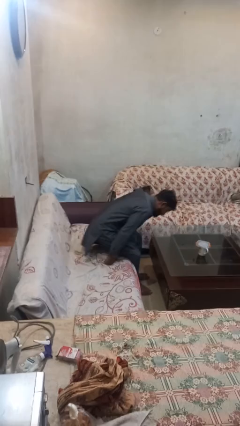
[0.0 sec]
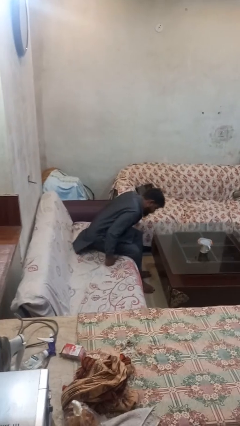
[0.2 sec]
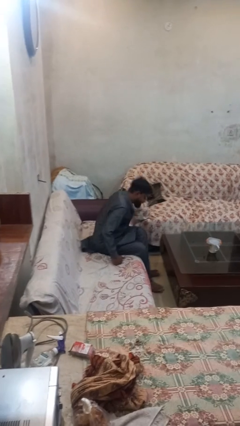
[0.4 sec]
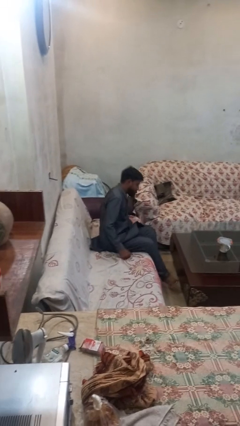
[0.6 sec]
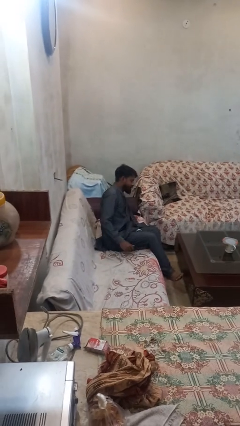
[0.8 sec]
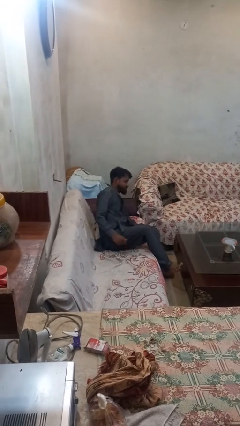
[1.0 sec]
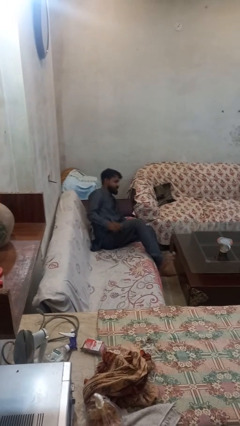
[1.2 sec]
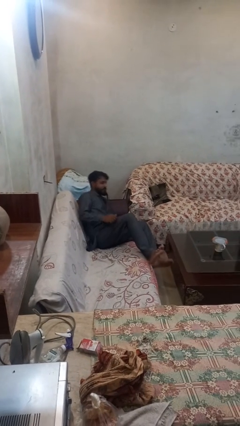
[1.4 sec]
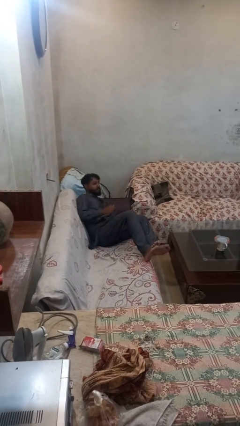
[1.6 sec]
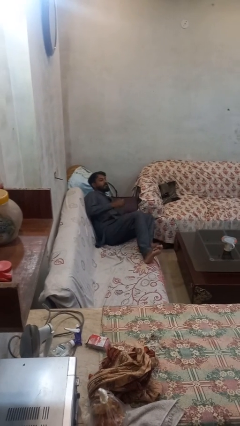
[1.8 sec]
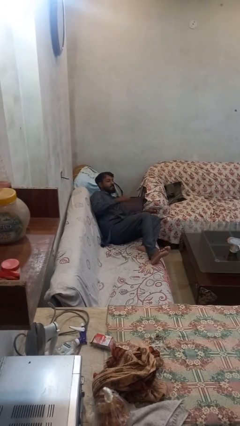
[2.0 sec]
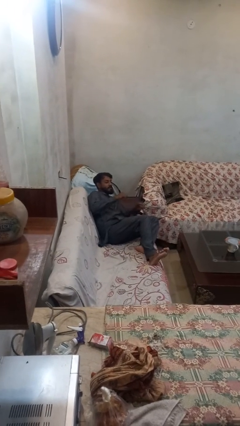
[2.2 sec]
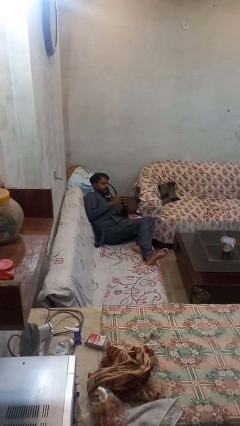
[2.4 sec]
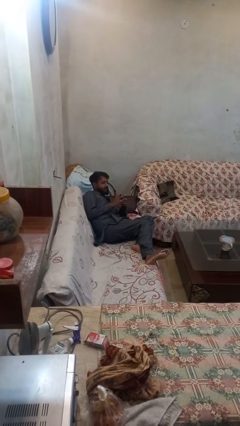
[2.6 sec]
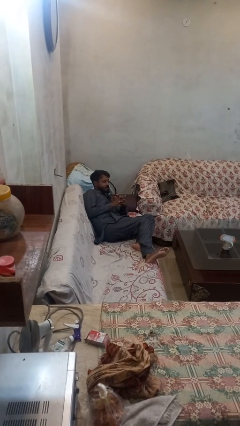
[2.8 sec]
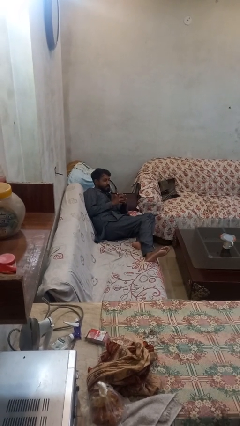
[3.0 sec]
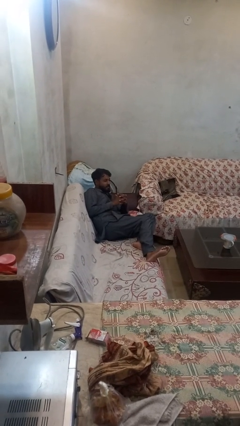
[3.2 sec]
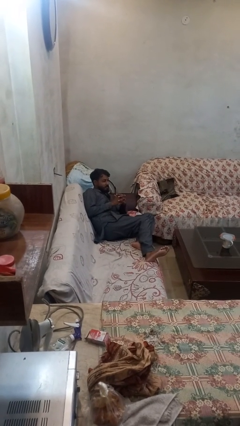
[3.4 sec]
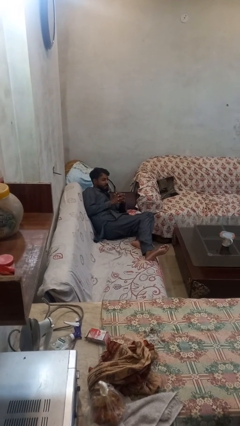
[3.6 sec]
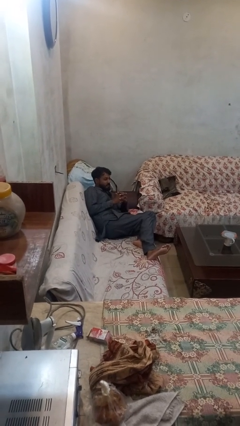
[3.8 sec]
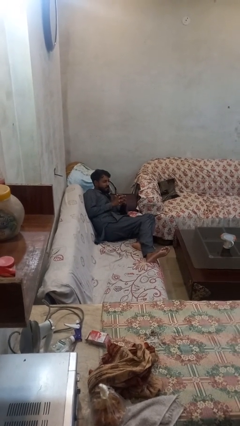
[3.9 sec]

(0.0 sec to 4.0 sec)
person lies down on couch

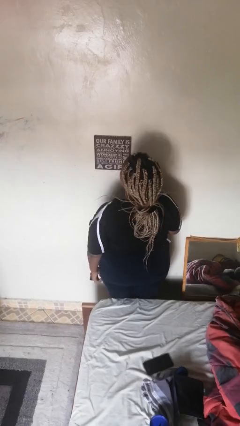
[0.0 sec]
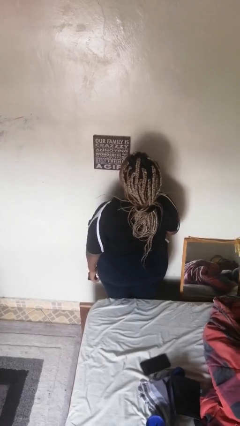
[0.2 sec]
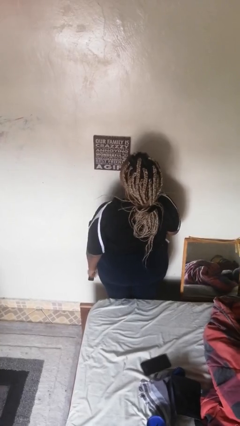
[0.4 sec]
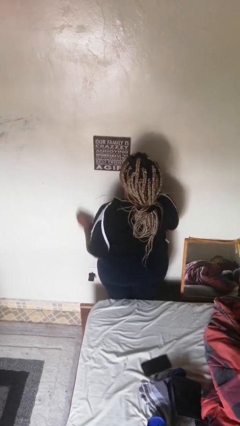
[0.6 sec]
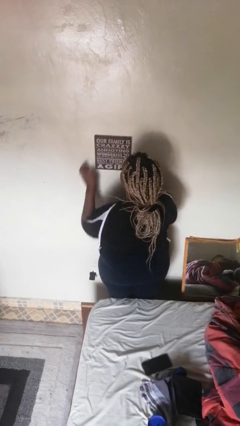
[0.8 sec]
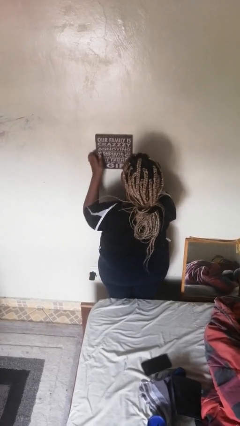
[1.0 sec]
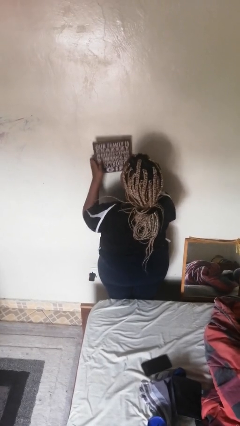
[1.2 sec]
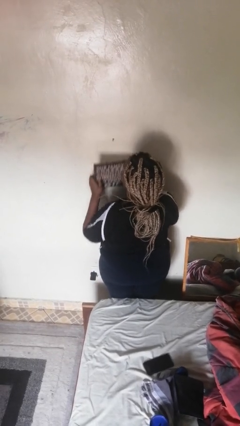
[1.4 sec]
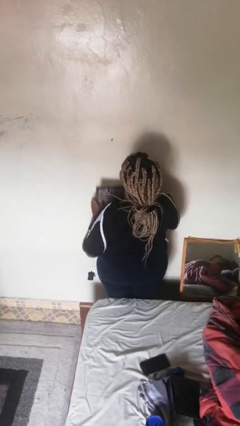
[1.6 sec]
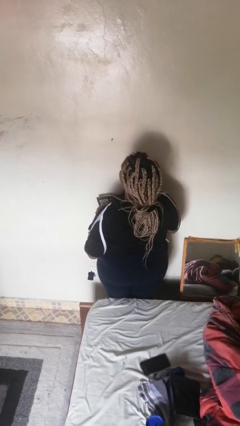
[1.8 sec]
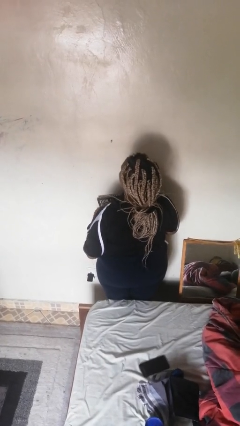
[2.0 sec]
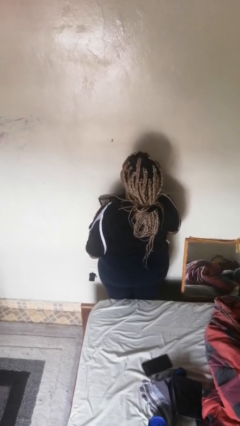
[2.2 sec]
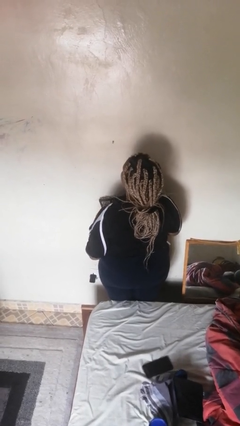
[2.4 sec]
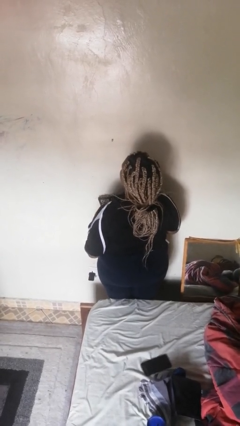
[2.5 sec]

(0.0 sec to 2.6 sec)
person takes down picture frame

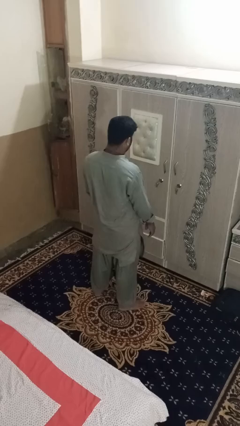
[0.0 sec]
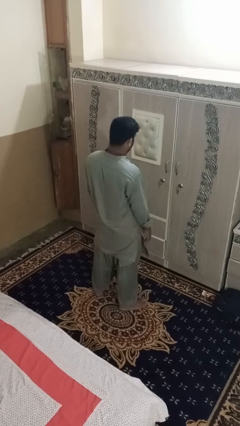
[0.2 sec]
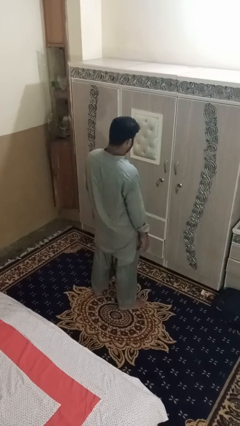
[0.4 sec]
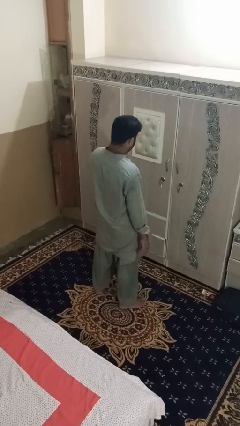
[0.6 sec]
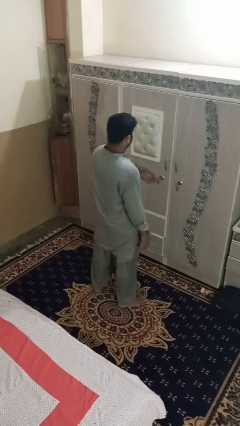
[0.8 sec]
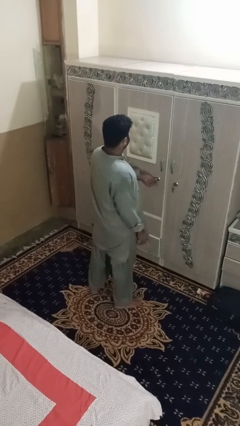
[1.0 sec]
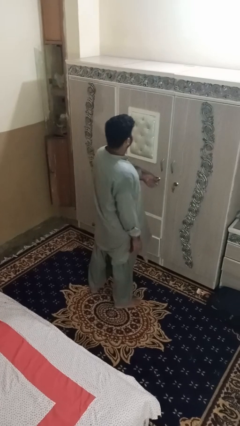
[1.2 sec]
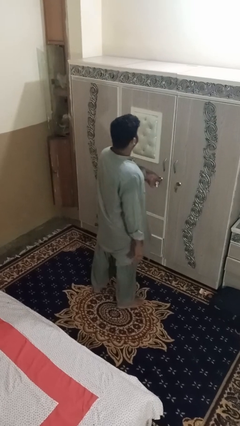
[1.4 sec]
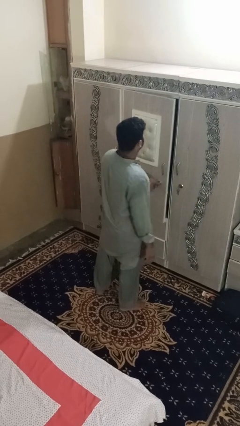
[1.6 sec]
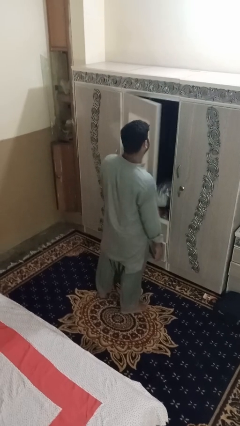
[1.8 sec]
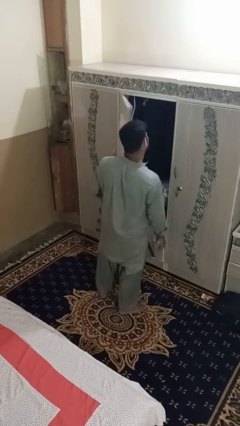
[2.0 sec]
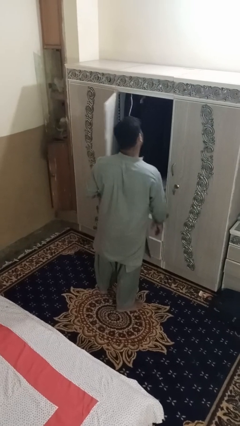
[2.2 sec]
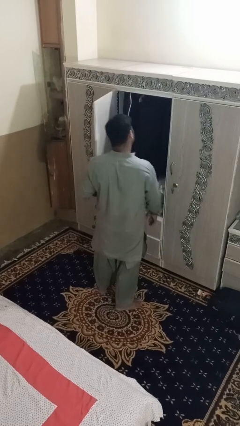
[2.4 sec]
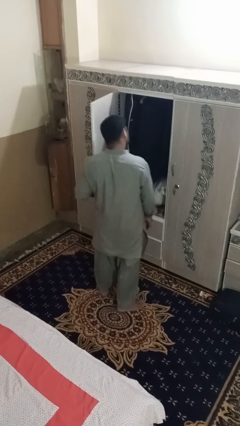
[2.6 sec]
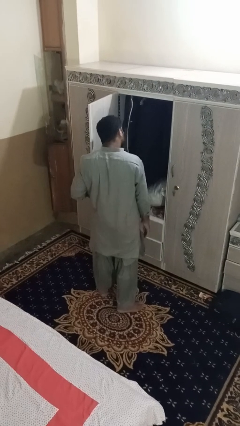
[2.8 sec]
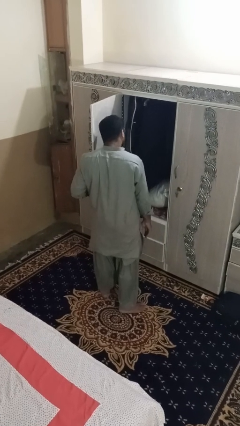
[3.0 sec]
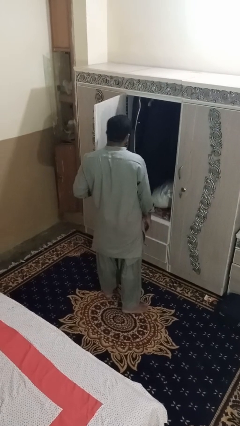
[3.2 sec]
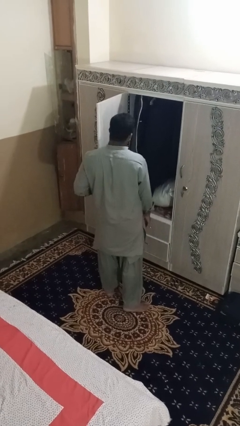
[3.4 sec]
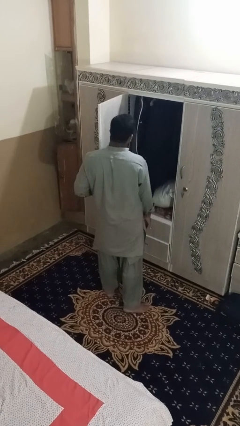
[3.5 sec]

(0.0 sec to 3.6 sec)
person opens dresser drawer

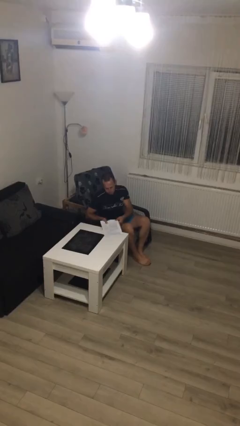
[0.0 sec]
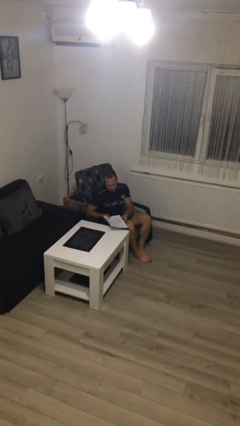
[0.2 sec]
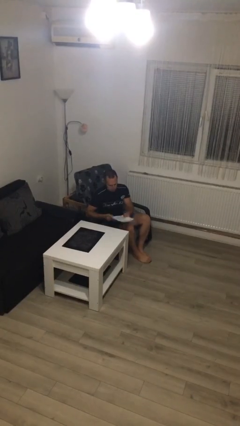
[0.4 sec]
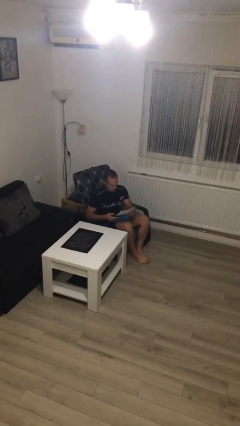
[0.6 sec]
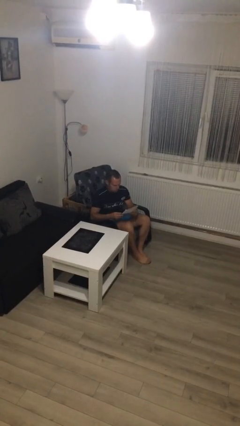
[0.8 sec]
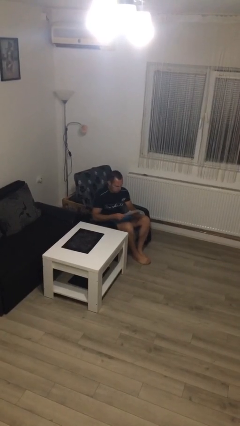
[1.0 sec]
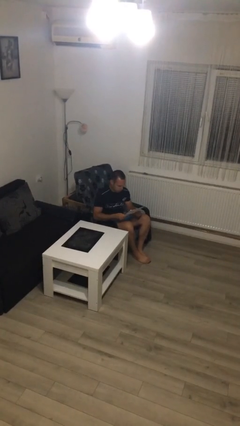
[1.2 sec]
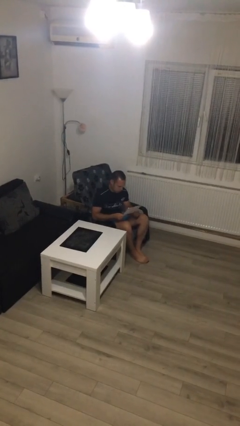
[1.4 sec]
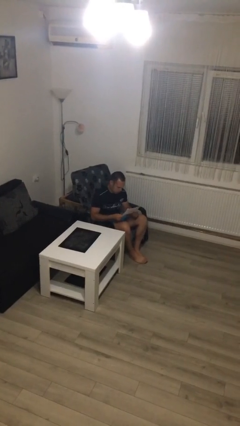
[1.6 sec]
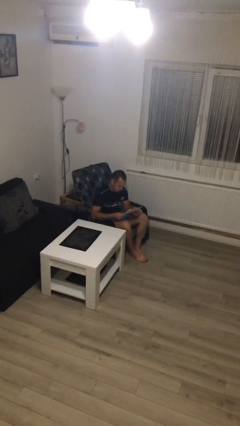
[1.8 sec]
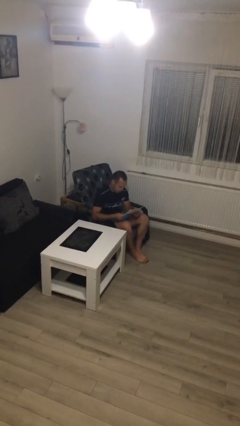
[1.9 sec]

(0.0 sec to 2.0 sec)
person picks up object from table

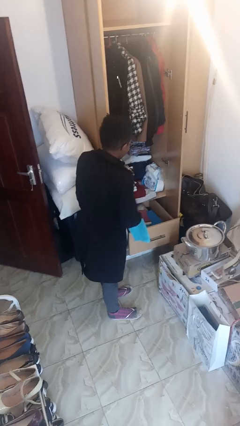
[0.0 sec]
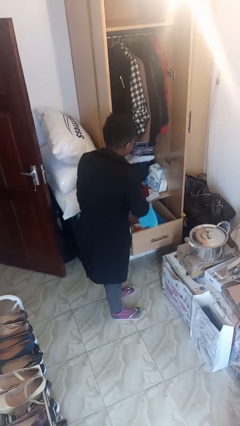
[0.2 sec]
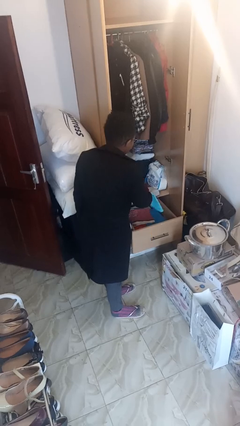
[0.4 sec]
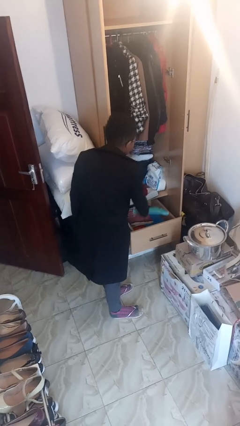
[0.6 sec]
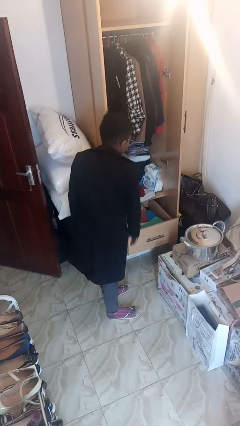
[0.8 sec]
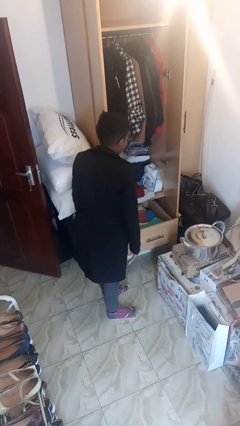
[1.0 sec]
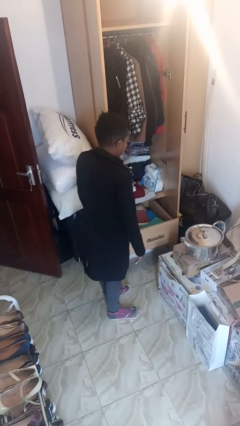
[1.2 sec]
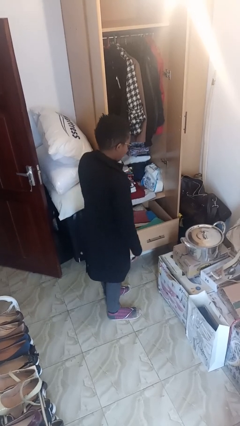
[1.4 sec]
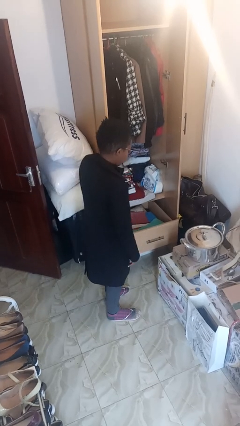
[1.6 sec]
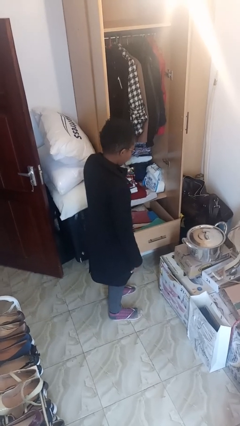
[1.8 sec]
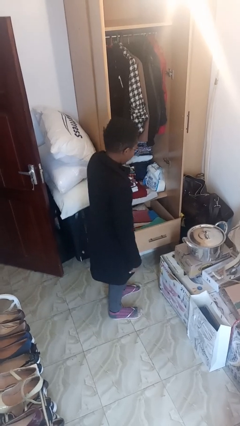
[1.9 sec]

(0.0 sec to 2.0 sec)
person puts clothes into dresser

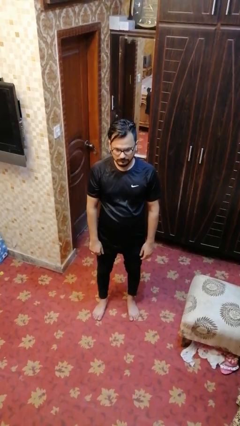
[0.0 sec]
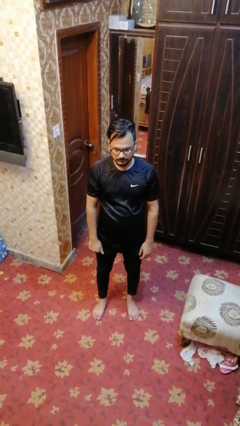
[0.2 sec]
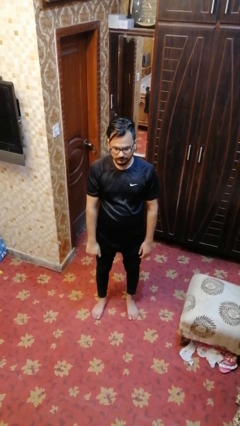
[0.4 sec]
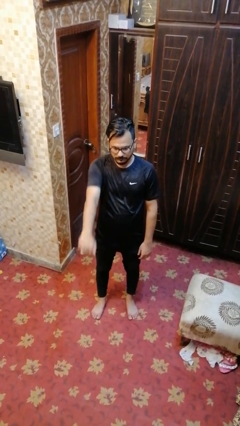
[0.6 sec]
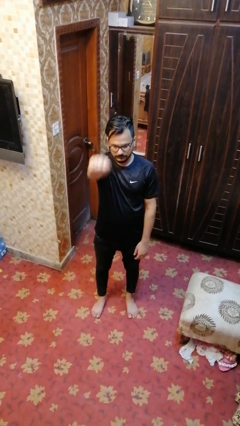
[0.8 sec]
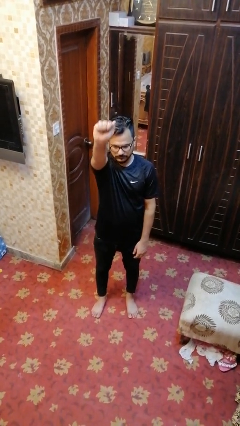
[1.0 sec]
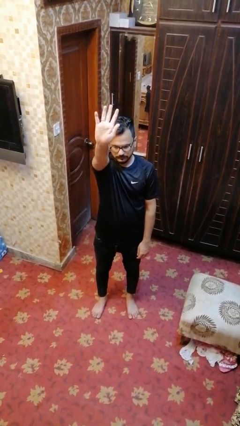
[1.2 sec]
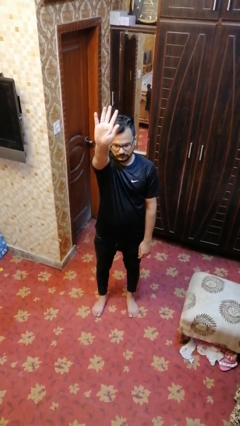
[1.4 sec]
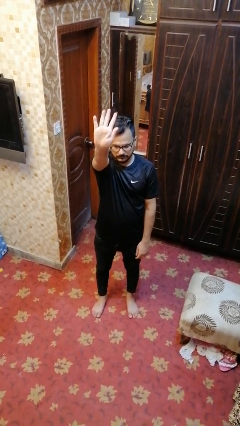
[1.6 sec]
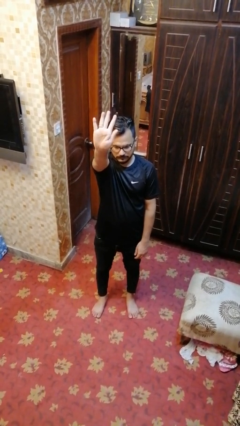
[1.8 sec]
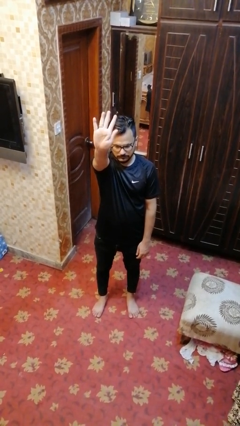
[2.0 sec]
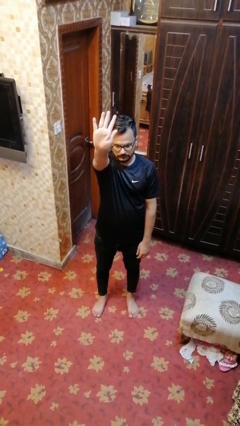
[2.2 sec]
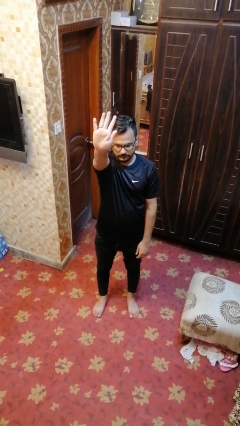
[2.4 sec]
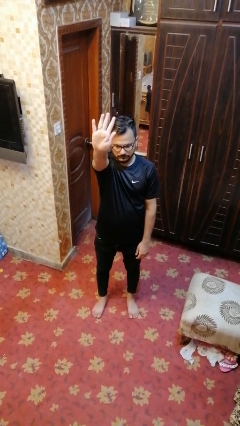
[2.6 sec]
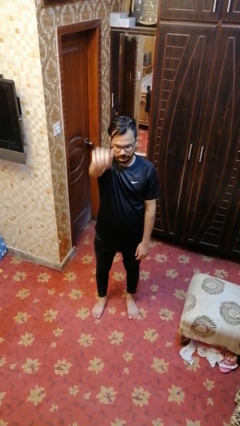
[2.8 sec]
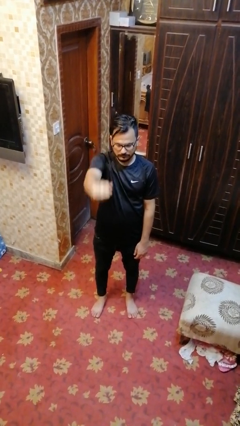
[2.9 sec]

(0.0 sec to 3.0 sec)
person gestures number five

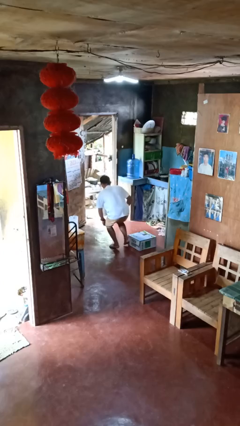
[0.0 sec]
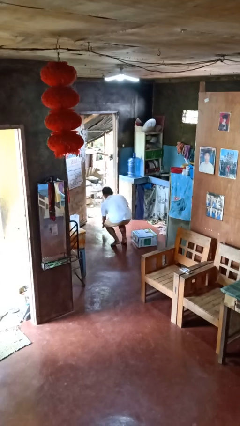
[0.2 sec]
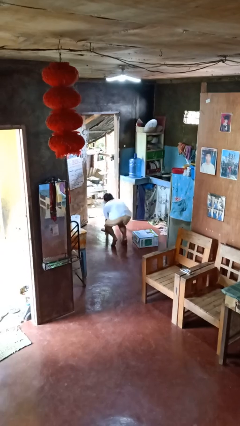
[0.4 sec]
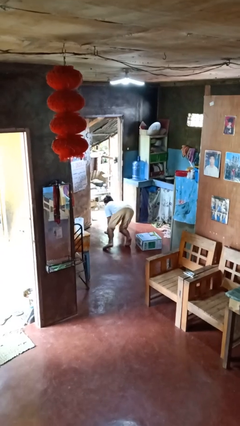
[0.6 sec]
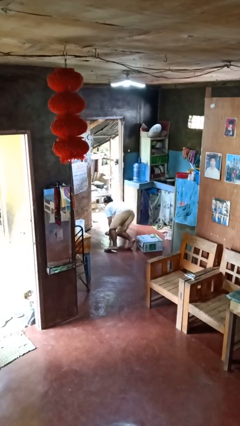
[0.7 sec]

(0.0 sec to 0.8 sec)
person trips on object on floor
